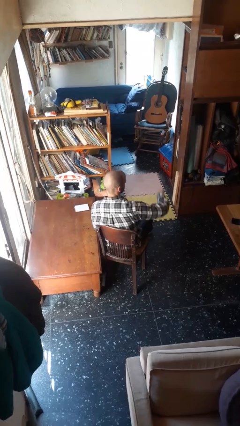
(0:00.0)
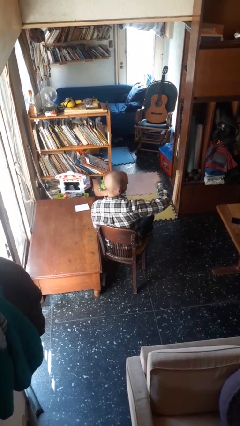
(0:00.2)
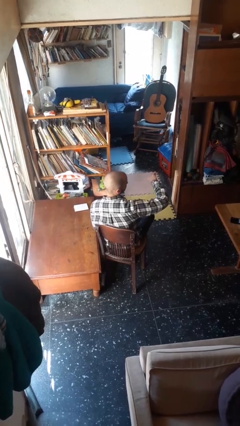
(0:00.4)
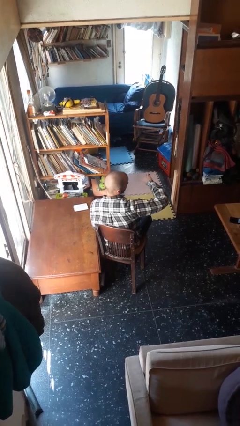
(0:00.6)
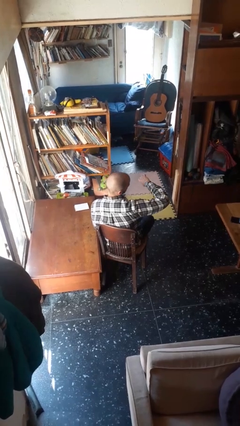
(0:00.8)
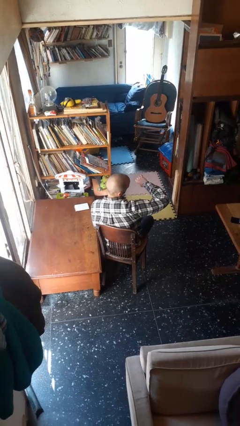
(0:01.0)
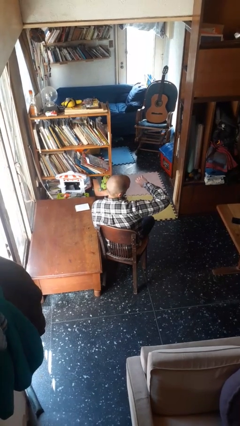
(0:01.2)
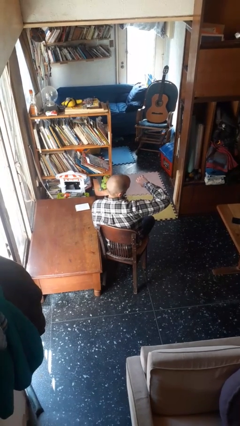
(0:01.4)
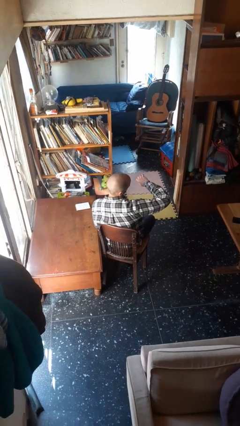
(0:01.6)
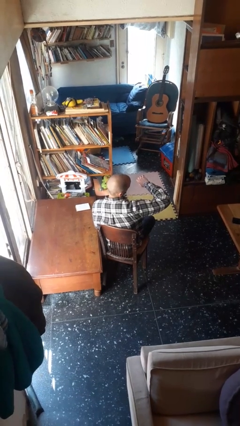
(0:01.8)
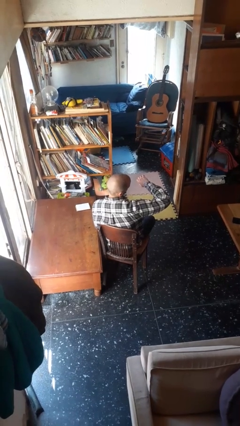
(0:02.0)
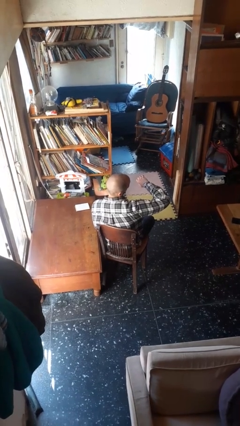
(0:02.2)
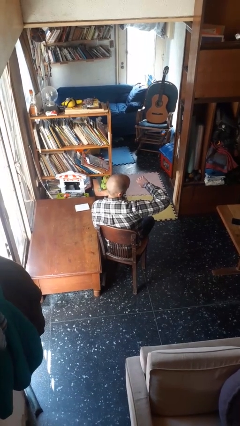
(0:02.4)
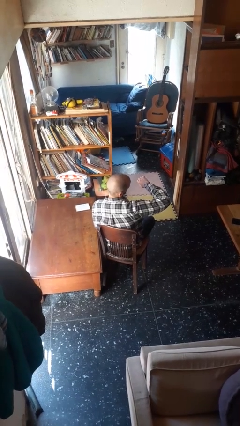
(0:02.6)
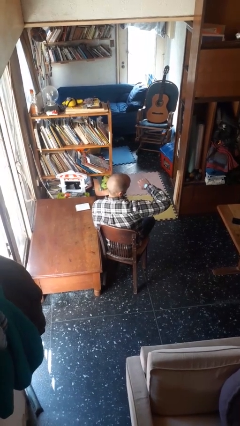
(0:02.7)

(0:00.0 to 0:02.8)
person looks at wristwatch

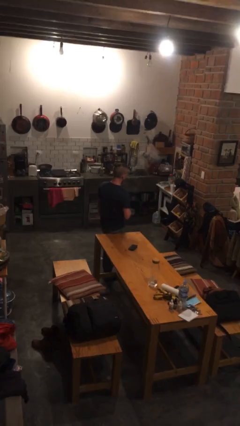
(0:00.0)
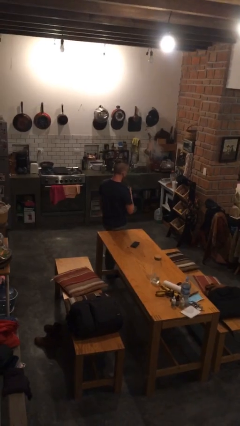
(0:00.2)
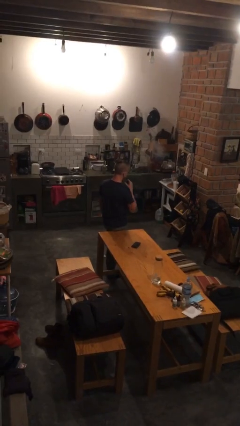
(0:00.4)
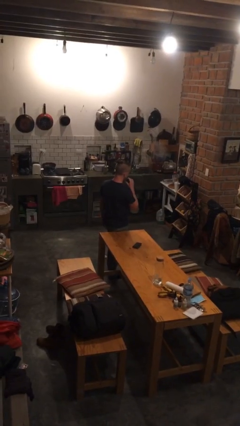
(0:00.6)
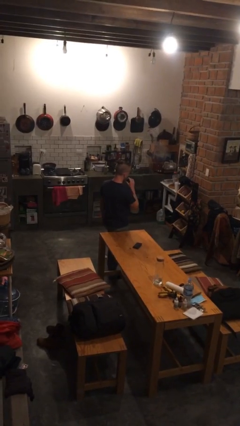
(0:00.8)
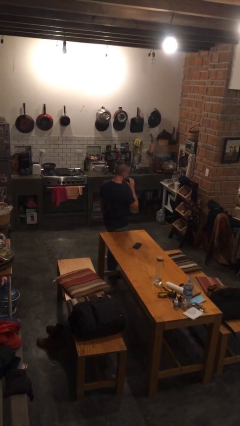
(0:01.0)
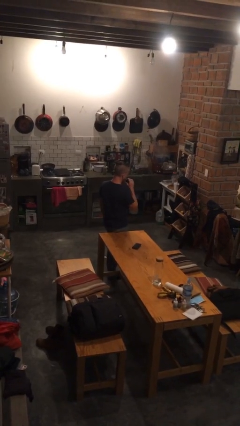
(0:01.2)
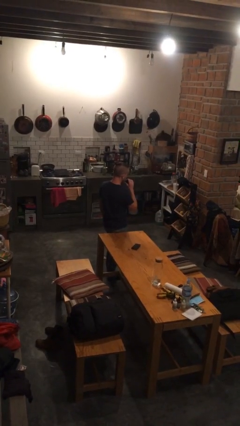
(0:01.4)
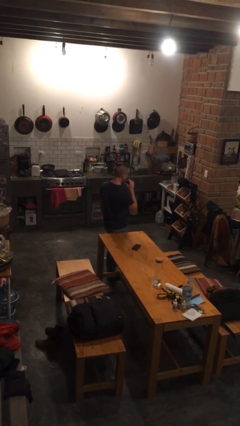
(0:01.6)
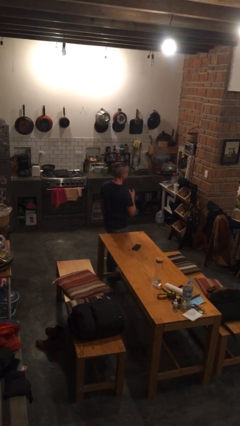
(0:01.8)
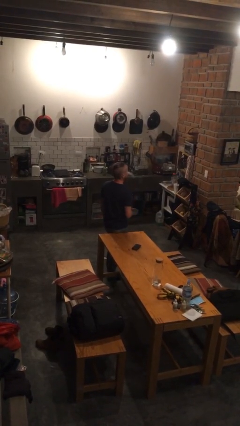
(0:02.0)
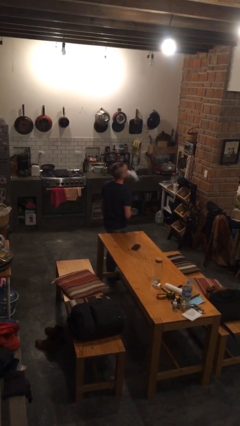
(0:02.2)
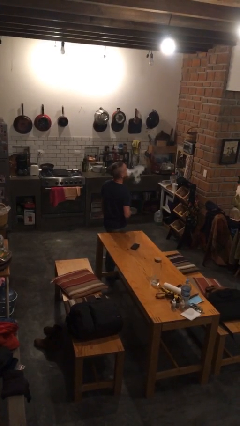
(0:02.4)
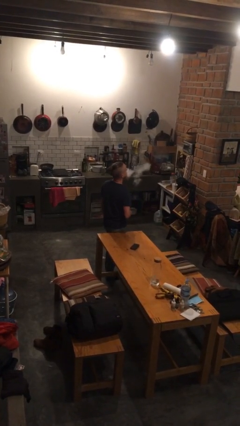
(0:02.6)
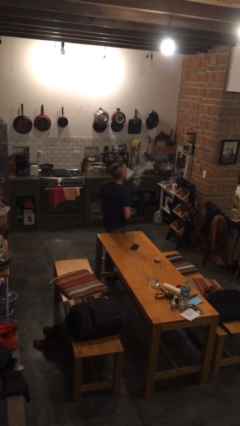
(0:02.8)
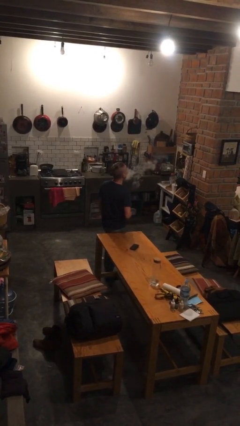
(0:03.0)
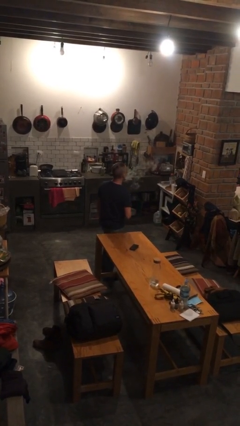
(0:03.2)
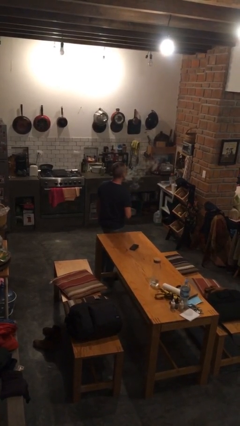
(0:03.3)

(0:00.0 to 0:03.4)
person vapes

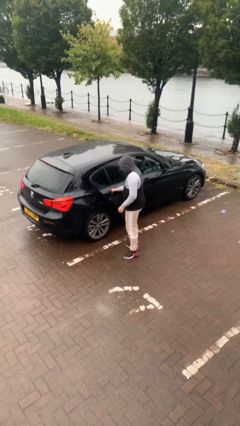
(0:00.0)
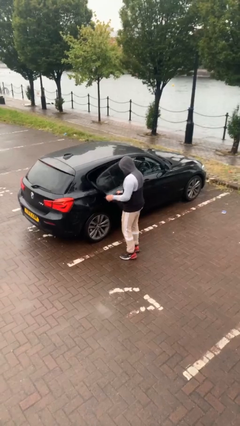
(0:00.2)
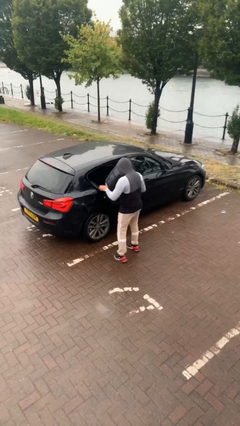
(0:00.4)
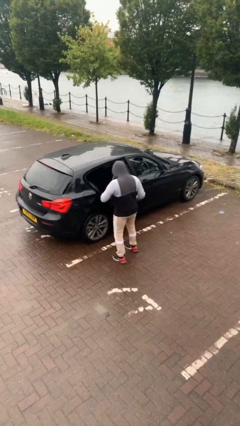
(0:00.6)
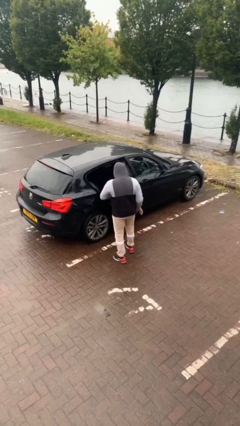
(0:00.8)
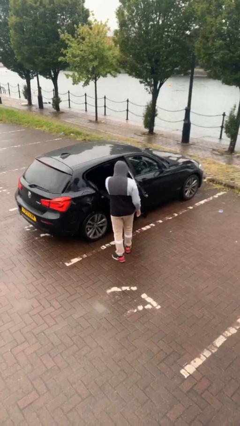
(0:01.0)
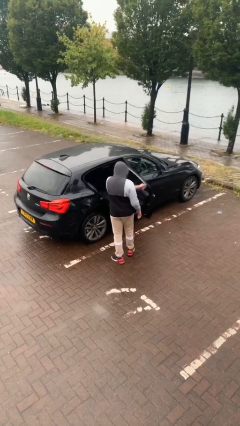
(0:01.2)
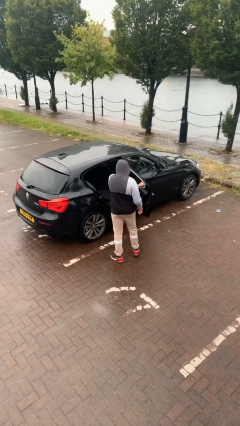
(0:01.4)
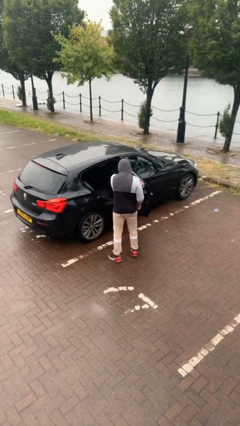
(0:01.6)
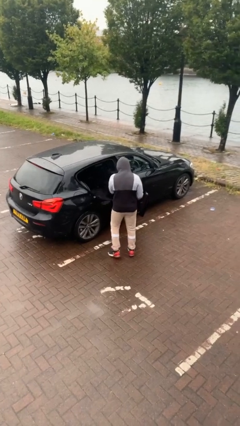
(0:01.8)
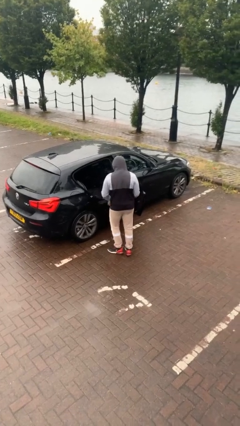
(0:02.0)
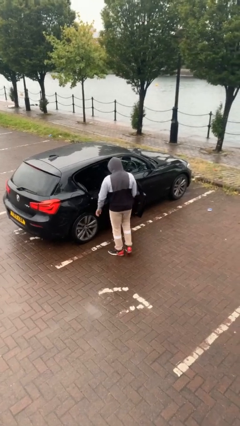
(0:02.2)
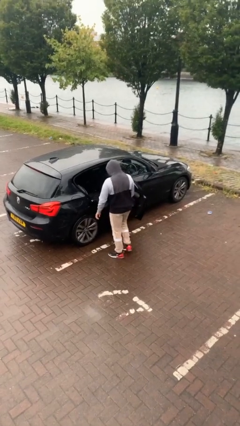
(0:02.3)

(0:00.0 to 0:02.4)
person opens car door

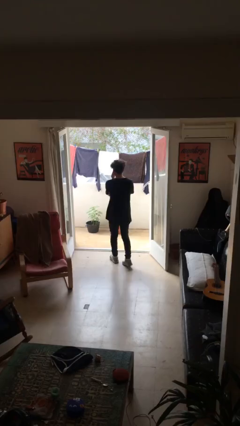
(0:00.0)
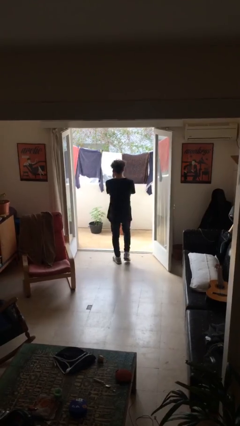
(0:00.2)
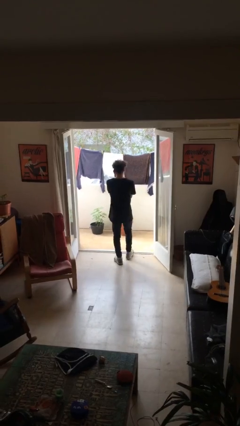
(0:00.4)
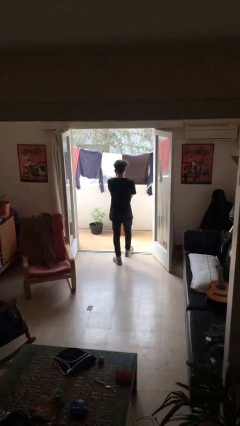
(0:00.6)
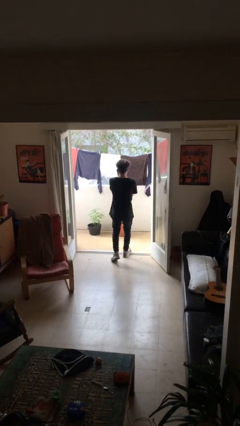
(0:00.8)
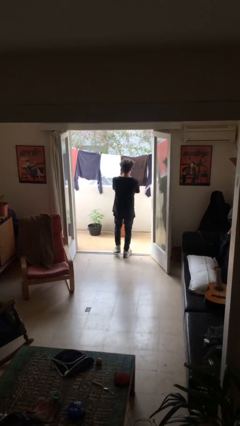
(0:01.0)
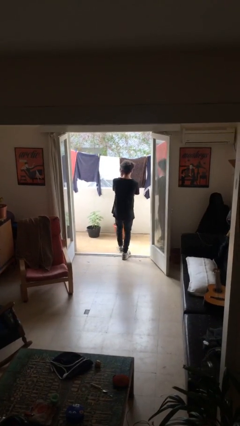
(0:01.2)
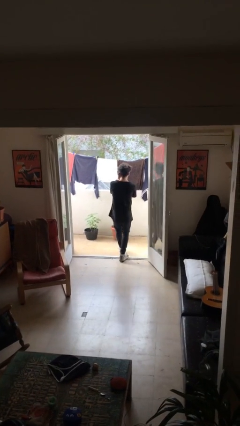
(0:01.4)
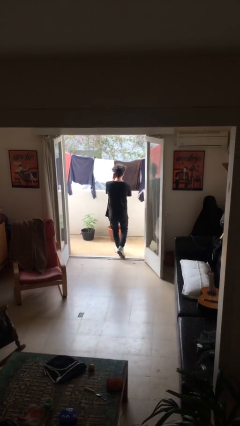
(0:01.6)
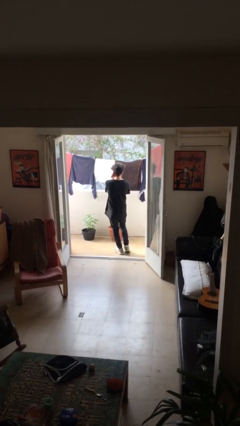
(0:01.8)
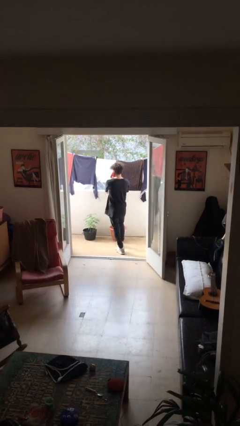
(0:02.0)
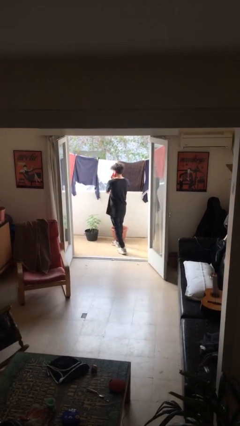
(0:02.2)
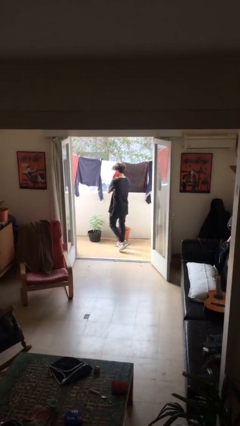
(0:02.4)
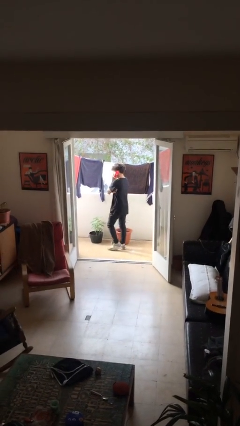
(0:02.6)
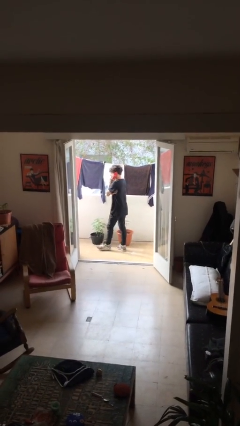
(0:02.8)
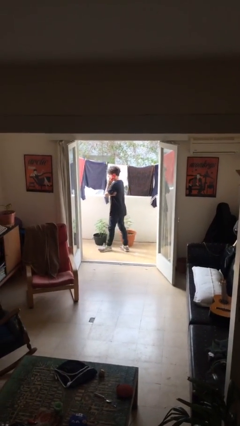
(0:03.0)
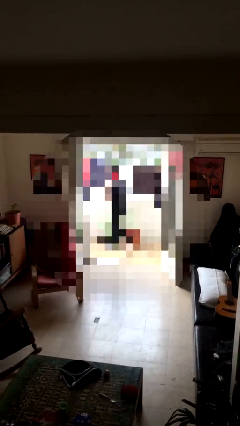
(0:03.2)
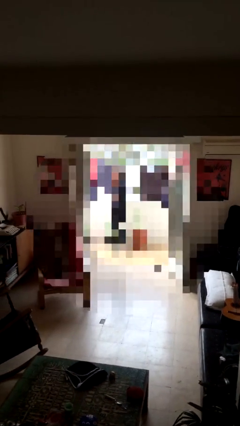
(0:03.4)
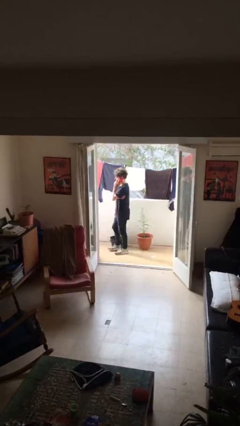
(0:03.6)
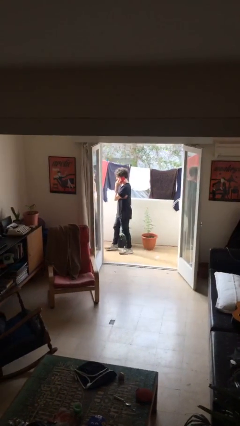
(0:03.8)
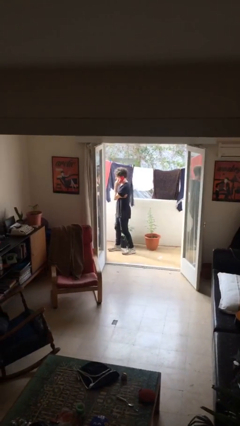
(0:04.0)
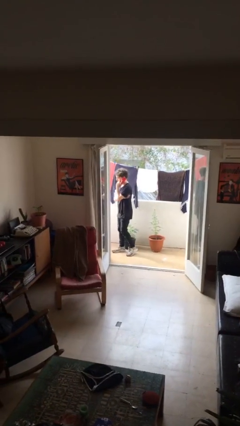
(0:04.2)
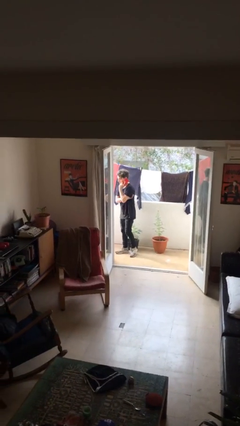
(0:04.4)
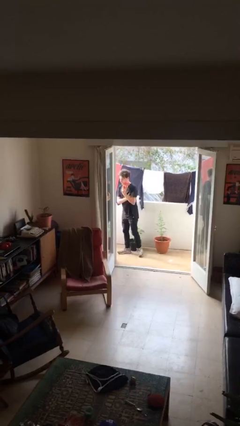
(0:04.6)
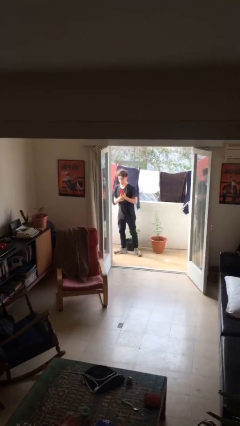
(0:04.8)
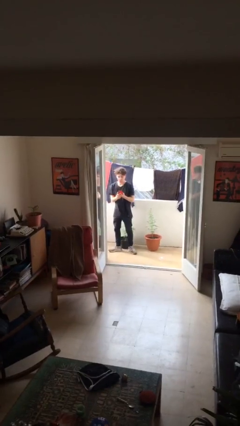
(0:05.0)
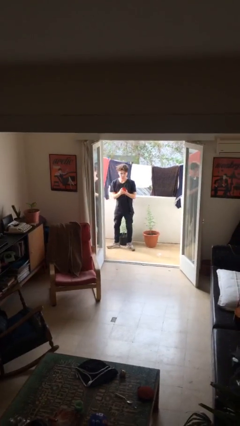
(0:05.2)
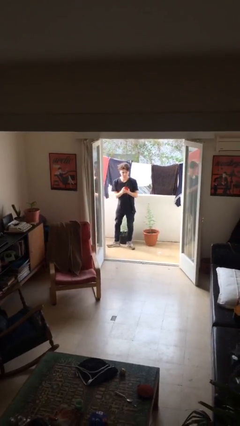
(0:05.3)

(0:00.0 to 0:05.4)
person exits scene through structure

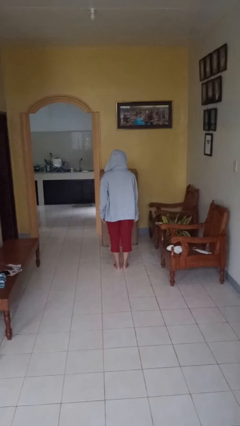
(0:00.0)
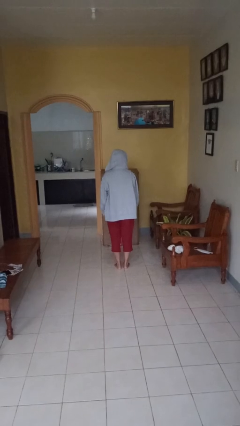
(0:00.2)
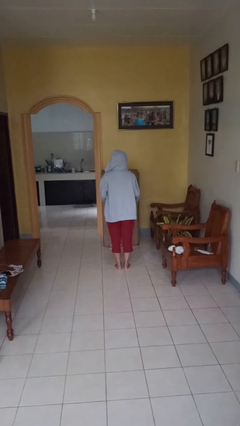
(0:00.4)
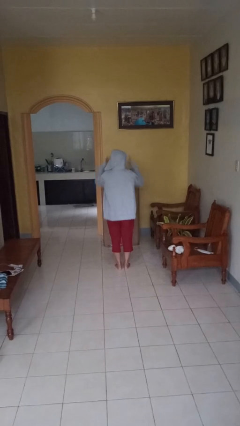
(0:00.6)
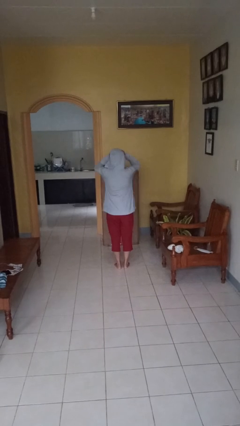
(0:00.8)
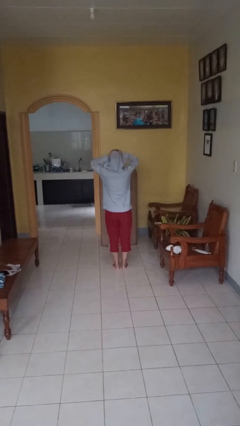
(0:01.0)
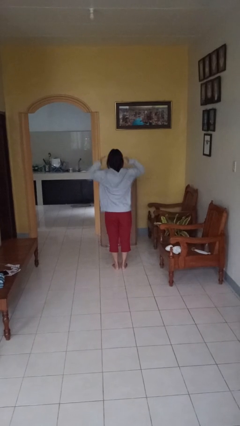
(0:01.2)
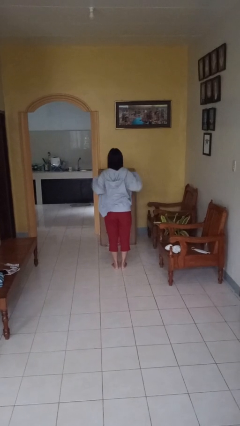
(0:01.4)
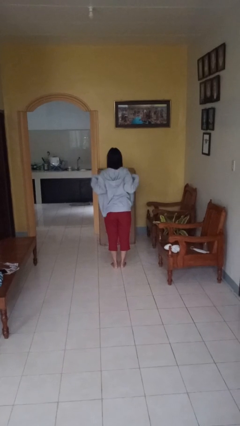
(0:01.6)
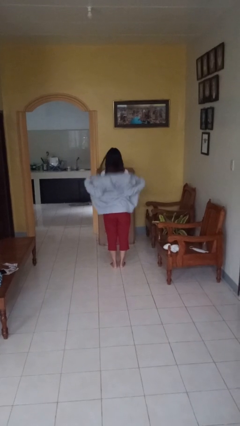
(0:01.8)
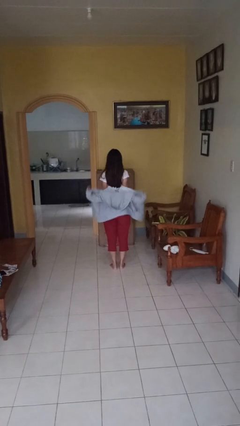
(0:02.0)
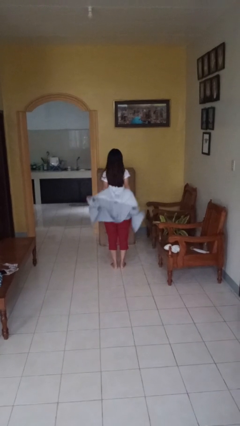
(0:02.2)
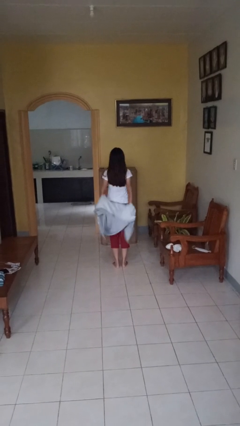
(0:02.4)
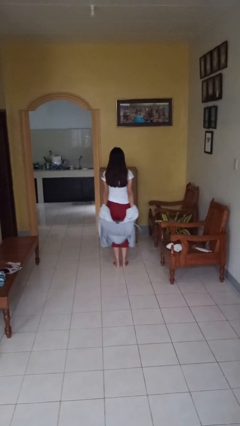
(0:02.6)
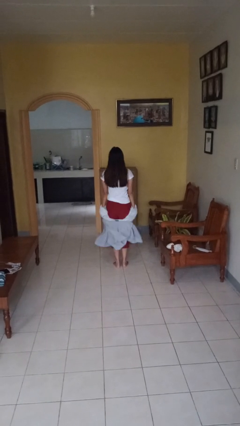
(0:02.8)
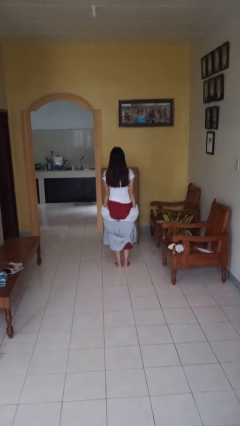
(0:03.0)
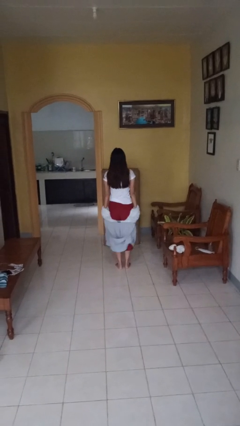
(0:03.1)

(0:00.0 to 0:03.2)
person takes off hoodie

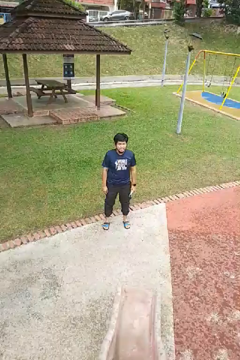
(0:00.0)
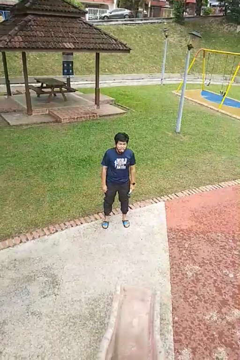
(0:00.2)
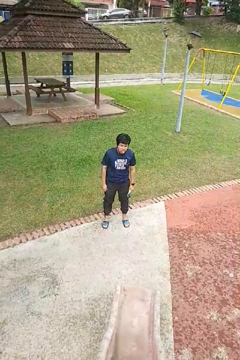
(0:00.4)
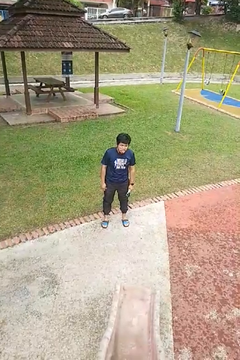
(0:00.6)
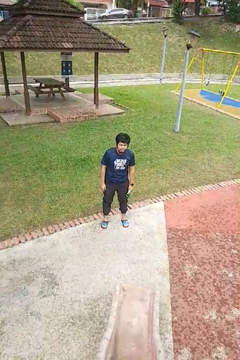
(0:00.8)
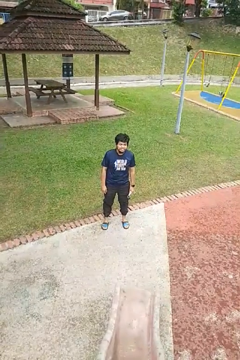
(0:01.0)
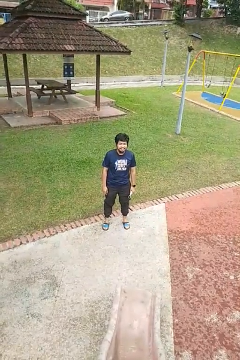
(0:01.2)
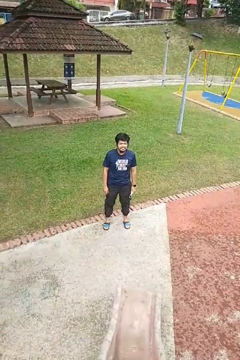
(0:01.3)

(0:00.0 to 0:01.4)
person sticks out tongue
